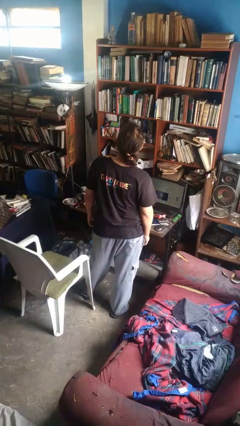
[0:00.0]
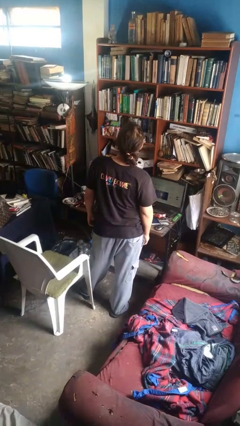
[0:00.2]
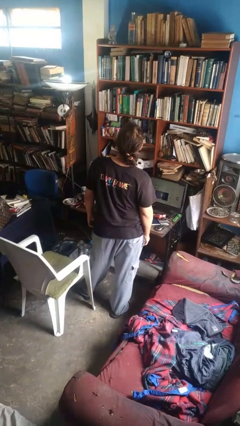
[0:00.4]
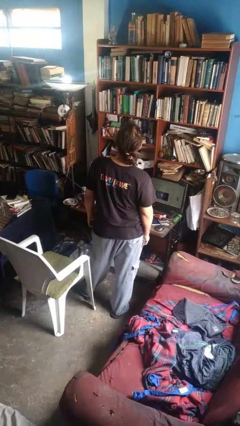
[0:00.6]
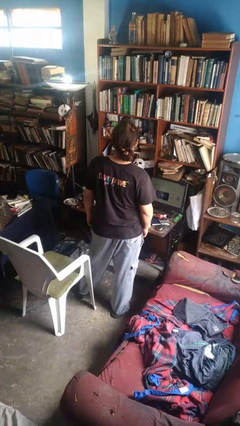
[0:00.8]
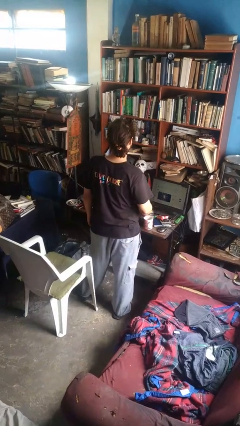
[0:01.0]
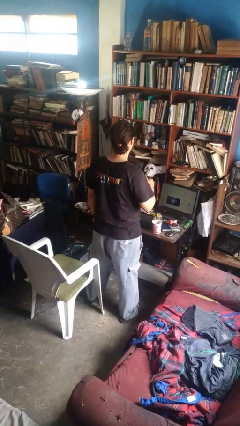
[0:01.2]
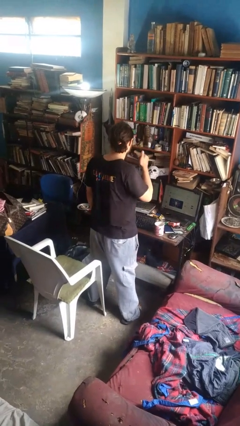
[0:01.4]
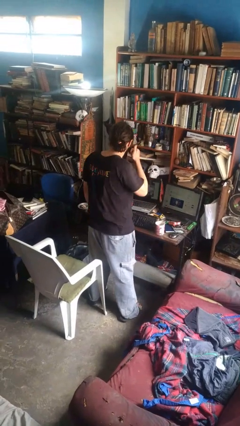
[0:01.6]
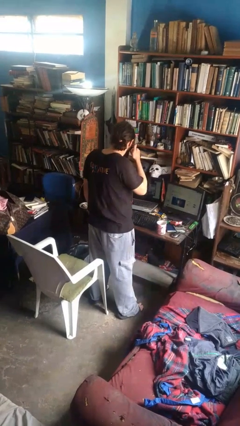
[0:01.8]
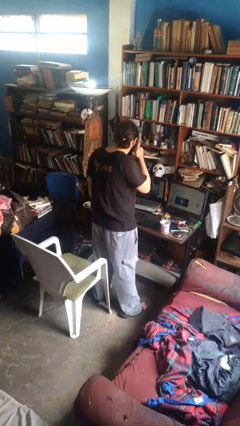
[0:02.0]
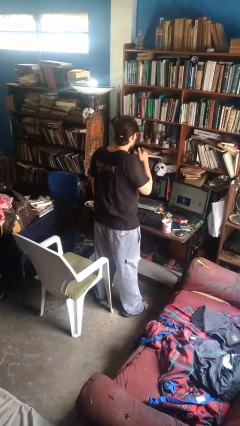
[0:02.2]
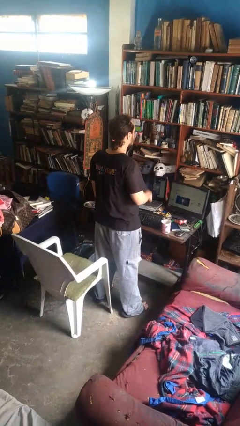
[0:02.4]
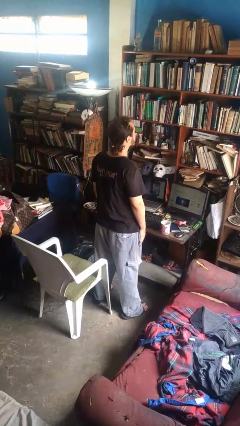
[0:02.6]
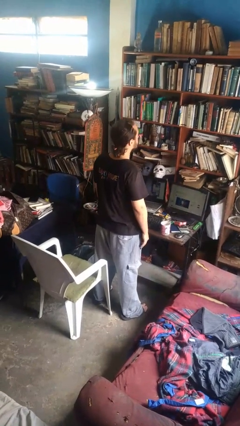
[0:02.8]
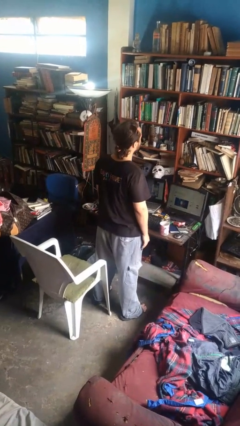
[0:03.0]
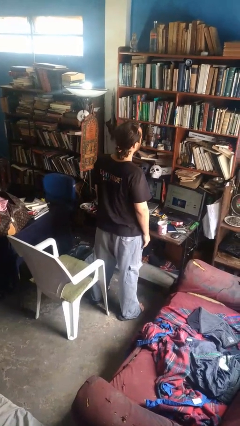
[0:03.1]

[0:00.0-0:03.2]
person gestures call me

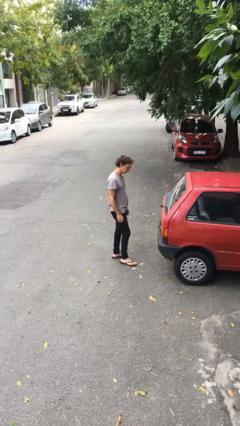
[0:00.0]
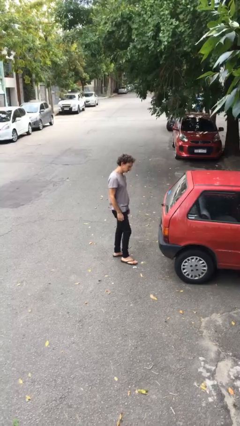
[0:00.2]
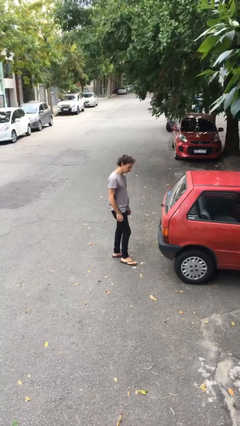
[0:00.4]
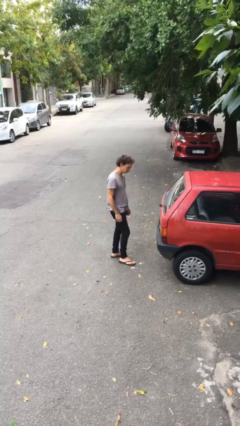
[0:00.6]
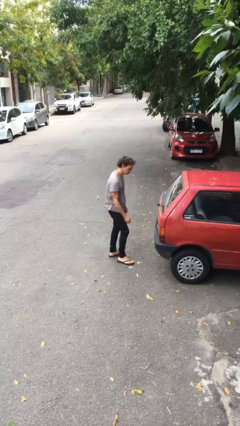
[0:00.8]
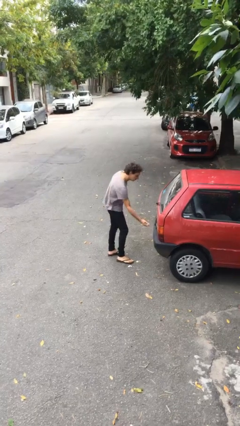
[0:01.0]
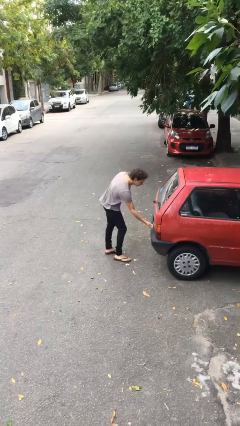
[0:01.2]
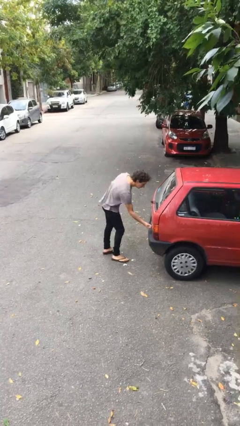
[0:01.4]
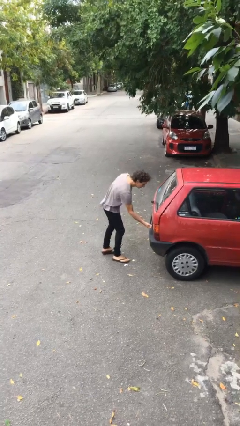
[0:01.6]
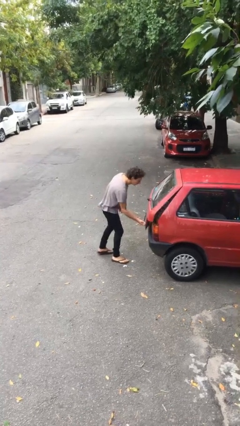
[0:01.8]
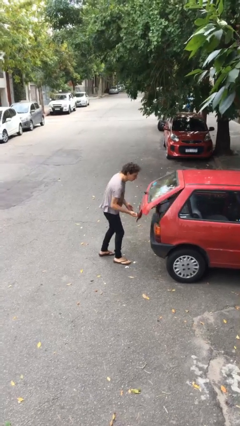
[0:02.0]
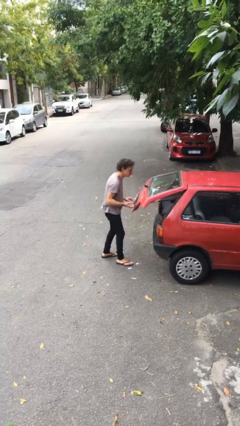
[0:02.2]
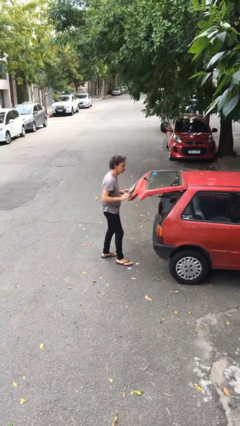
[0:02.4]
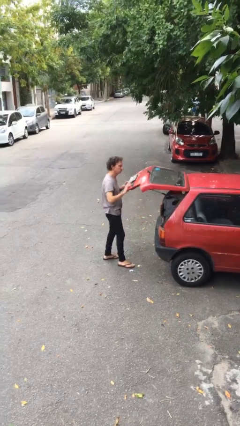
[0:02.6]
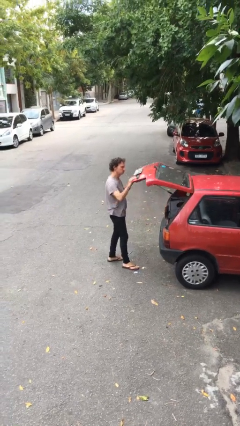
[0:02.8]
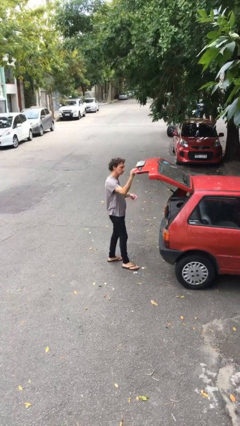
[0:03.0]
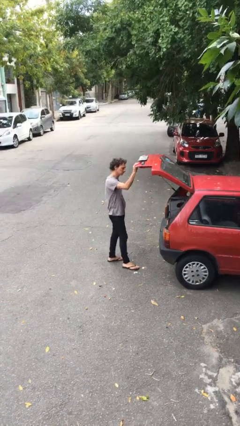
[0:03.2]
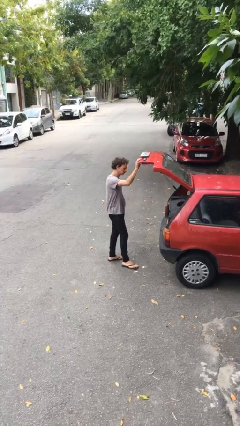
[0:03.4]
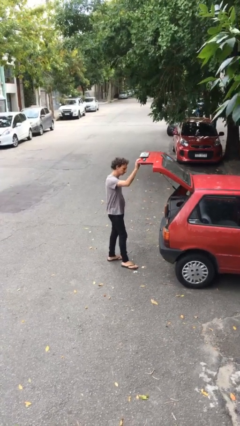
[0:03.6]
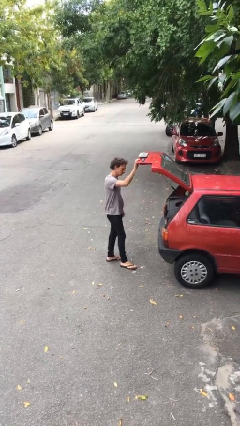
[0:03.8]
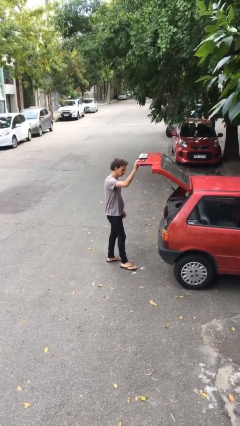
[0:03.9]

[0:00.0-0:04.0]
person opens car trunk

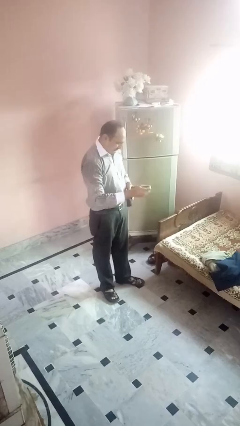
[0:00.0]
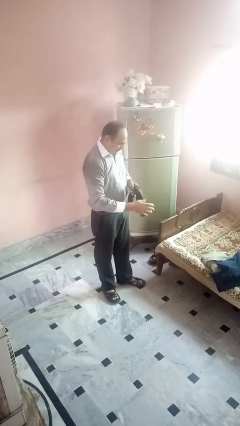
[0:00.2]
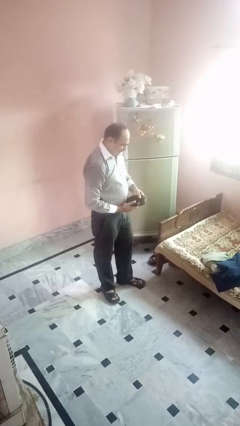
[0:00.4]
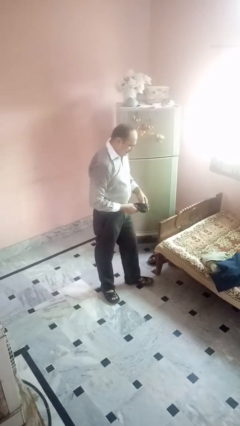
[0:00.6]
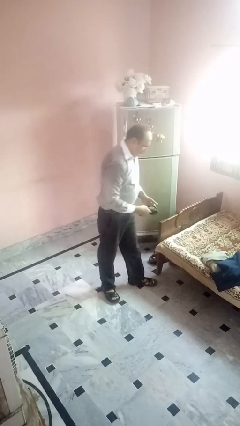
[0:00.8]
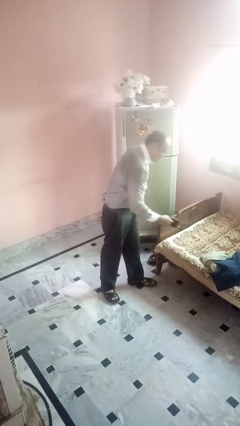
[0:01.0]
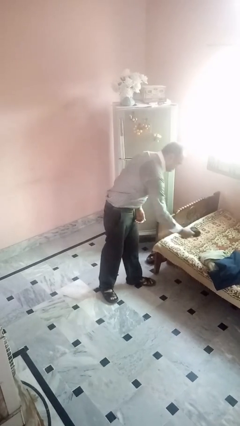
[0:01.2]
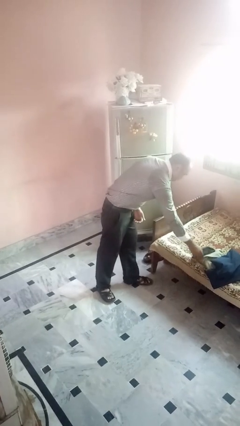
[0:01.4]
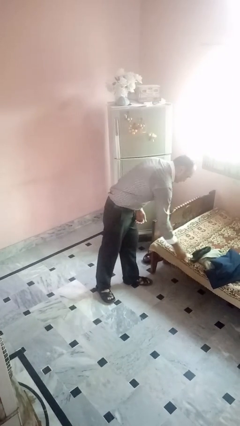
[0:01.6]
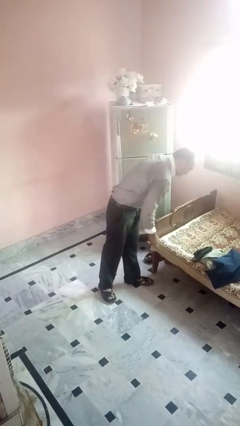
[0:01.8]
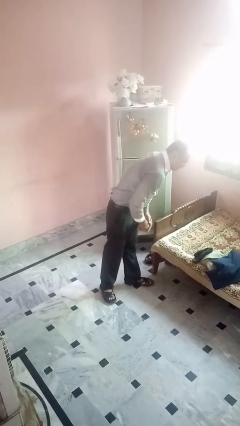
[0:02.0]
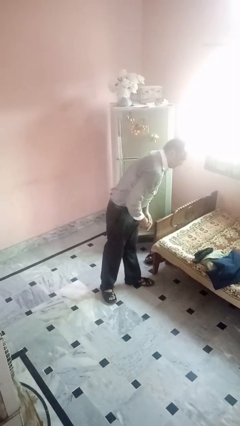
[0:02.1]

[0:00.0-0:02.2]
person folds socks

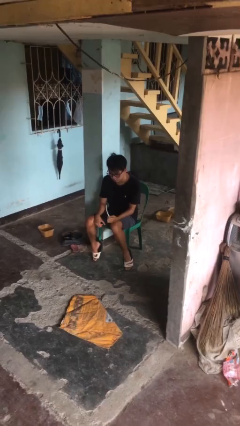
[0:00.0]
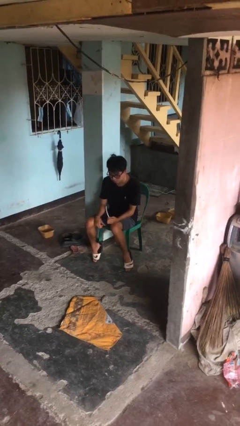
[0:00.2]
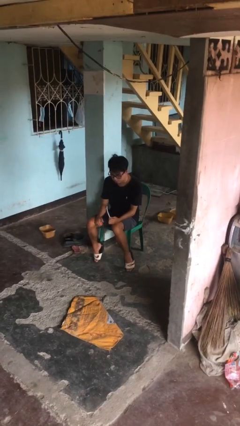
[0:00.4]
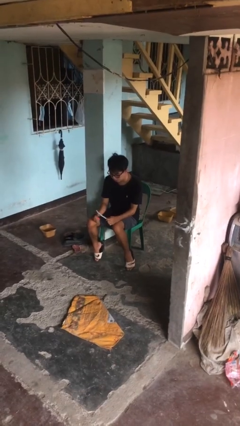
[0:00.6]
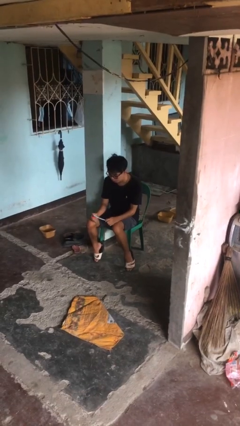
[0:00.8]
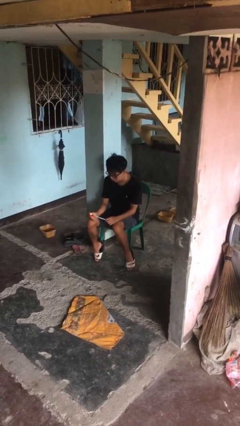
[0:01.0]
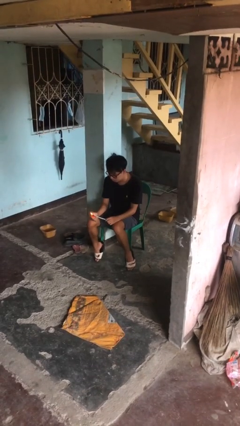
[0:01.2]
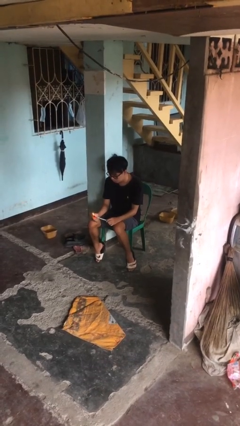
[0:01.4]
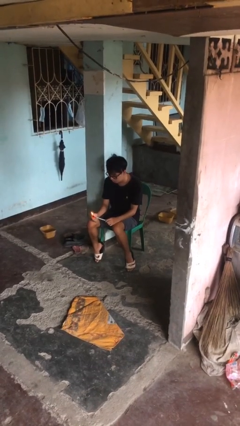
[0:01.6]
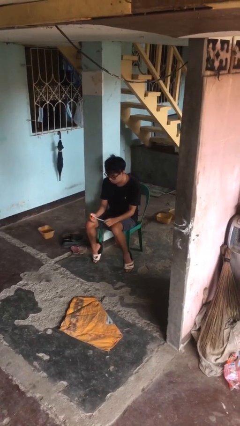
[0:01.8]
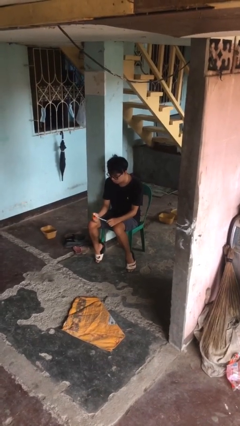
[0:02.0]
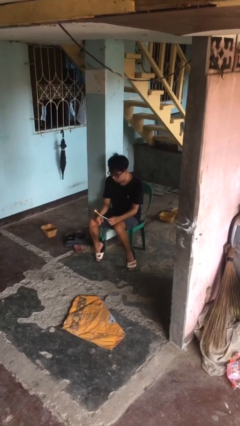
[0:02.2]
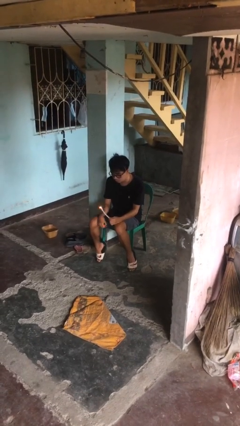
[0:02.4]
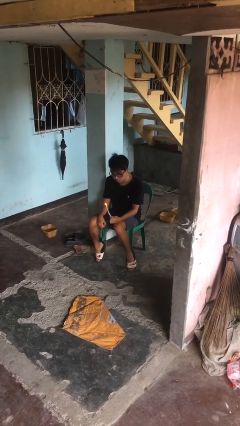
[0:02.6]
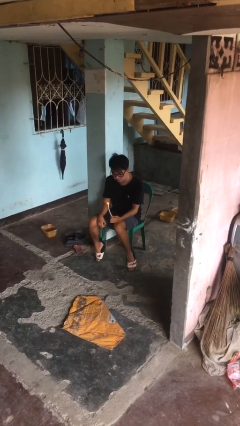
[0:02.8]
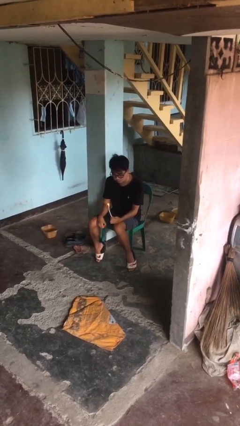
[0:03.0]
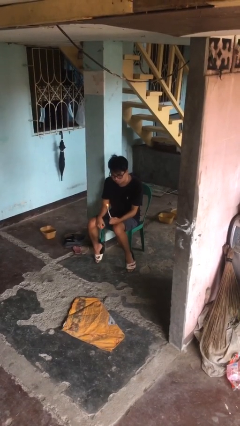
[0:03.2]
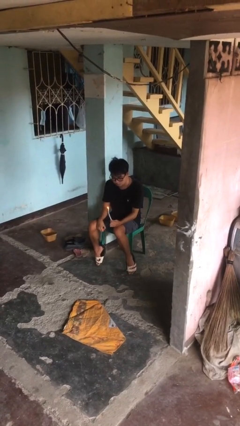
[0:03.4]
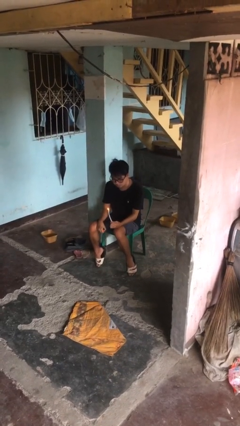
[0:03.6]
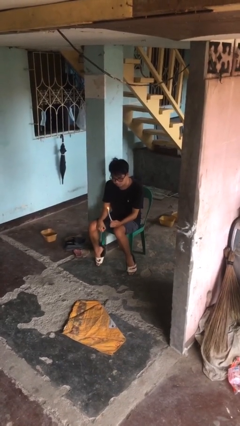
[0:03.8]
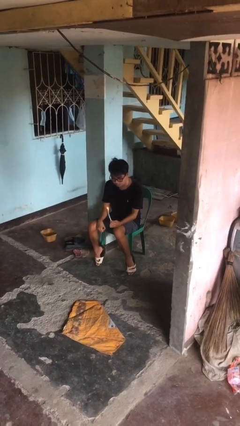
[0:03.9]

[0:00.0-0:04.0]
person lights candle

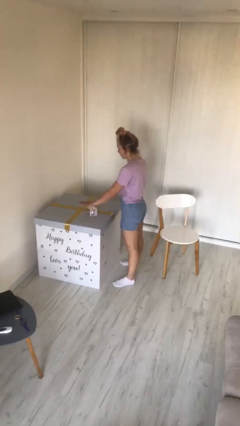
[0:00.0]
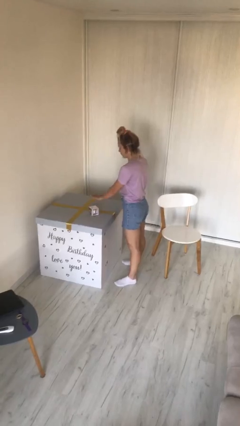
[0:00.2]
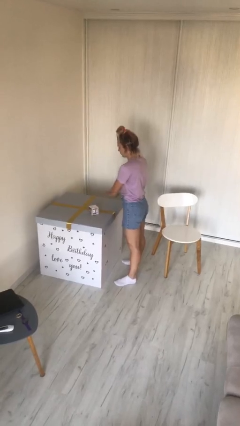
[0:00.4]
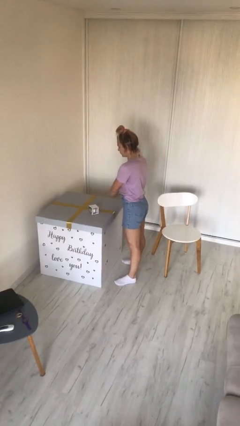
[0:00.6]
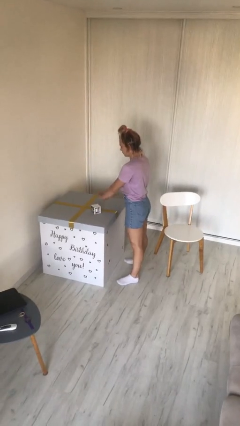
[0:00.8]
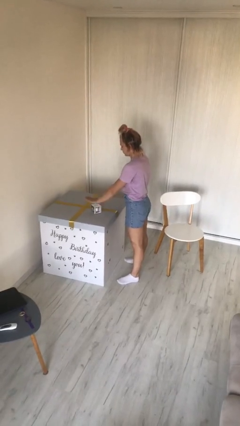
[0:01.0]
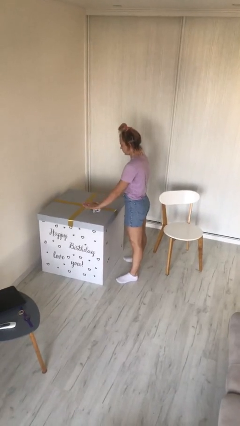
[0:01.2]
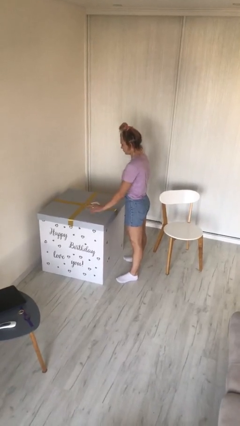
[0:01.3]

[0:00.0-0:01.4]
person waves hand over object

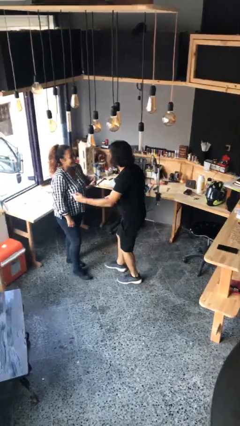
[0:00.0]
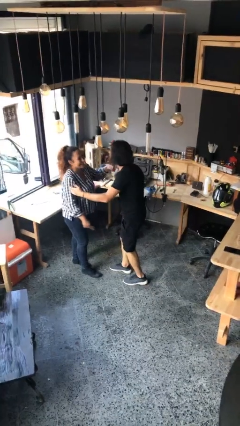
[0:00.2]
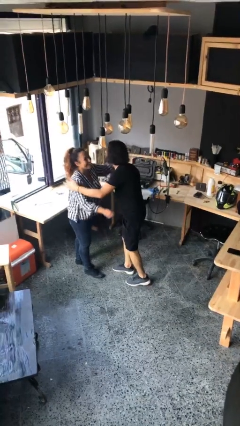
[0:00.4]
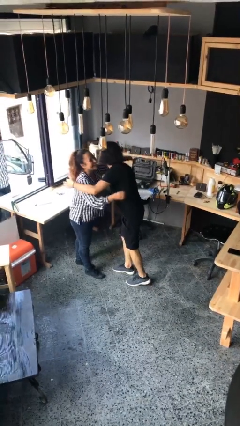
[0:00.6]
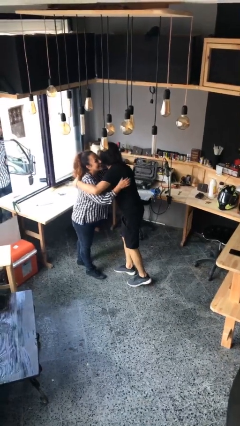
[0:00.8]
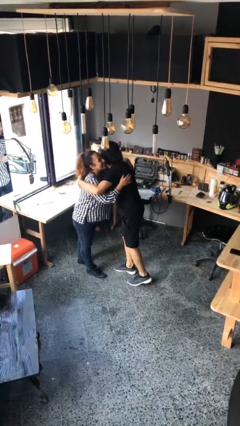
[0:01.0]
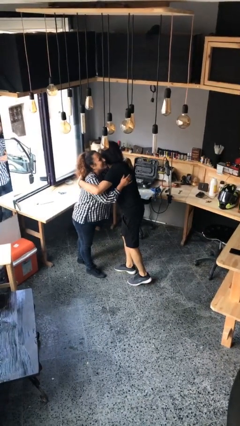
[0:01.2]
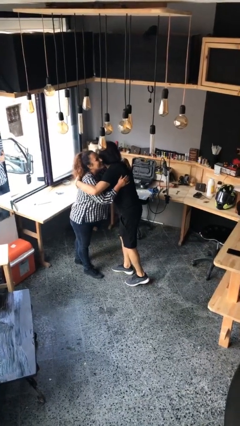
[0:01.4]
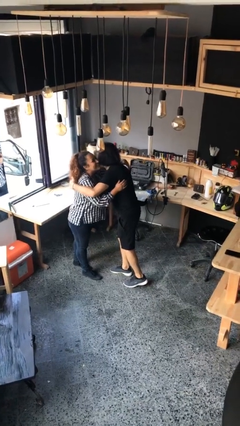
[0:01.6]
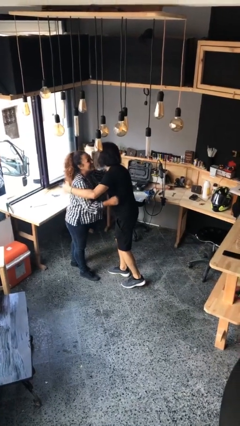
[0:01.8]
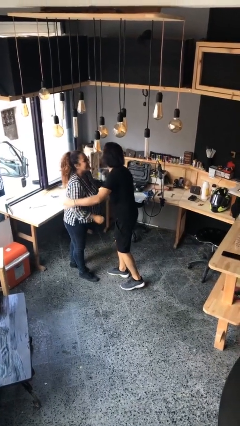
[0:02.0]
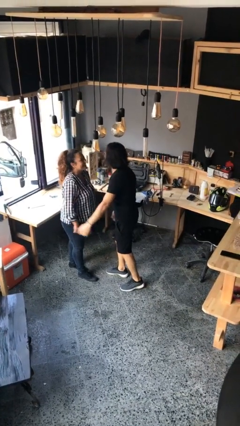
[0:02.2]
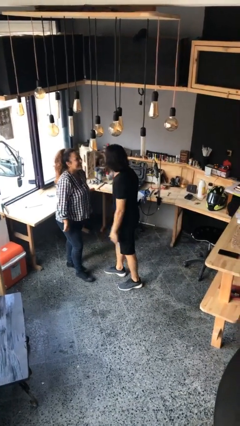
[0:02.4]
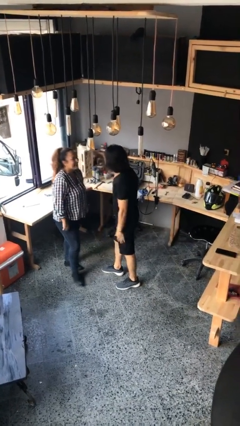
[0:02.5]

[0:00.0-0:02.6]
person embraces person
